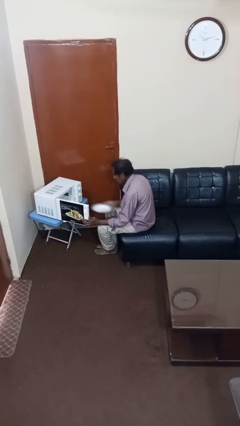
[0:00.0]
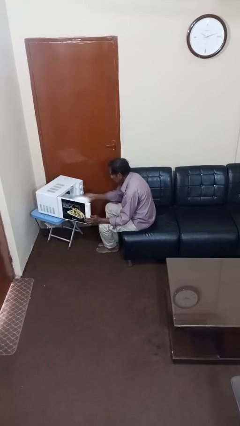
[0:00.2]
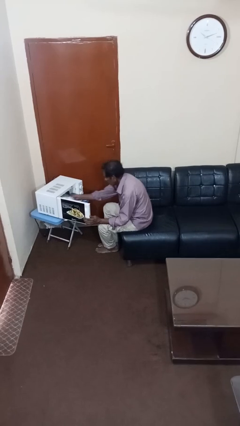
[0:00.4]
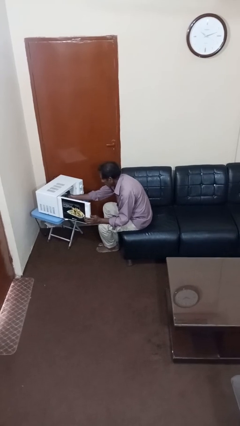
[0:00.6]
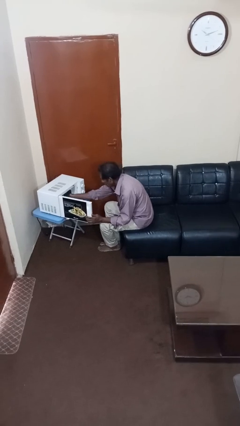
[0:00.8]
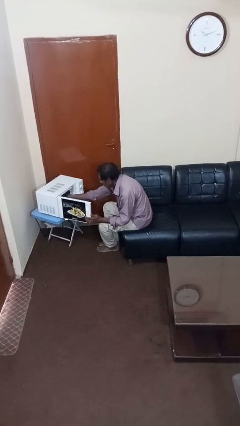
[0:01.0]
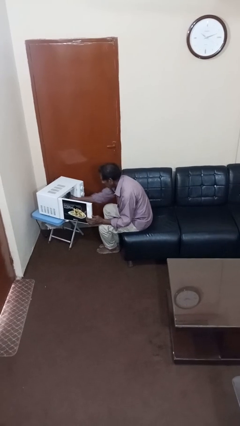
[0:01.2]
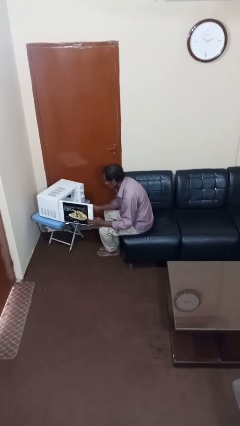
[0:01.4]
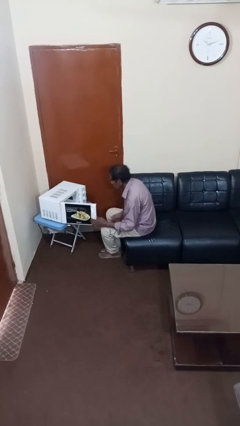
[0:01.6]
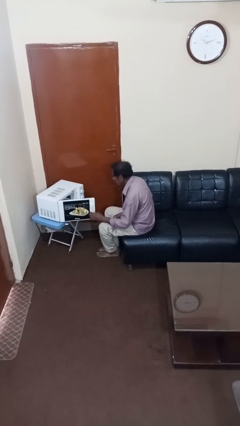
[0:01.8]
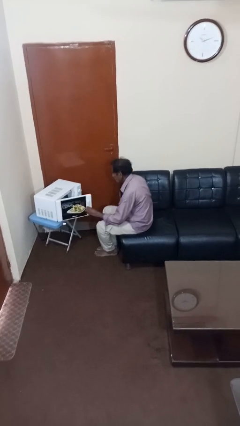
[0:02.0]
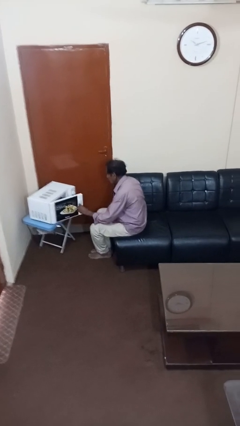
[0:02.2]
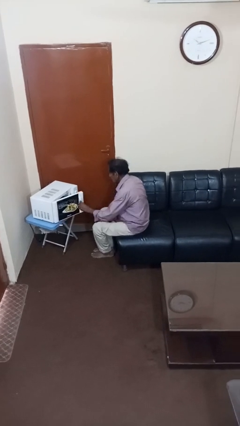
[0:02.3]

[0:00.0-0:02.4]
person puts object into microwave

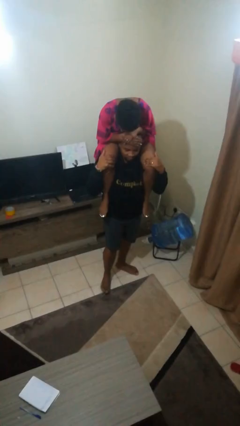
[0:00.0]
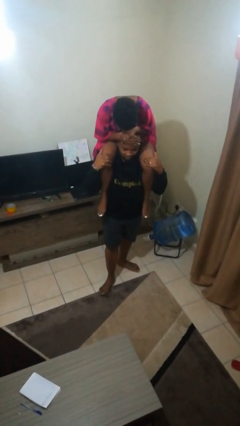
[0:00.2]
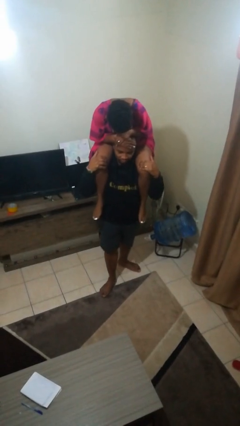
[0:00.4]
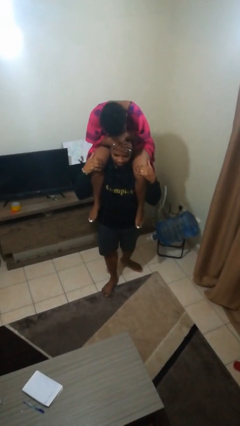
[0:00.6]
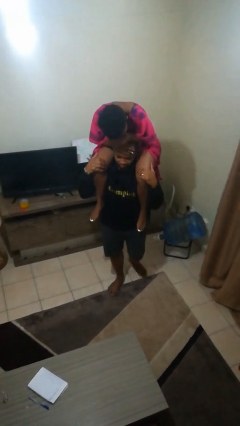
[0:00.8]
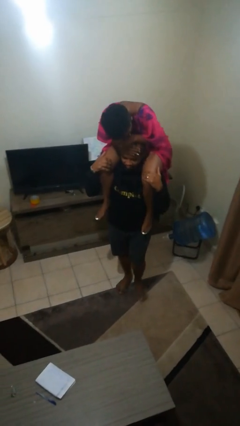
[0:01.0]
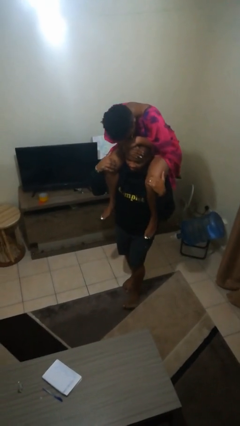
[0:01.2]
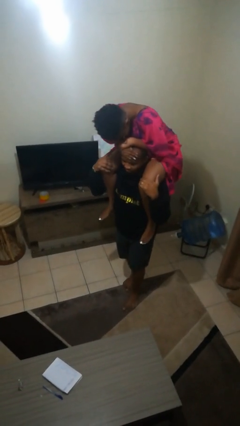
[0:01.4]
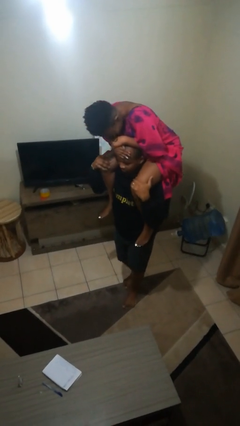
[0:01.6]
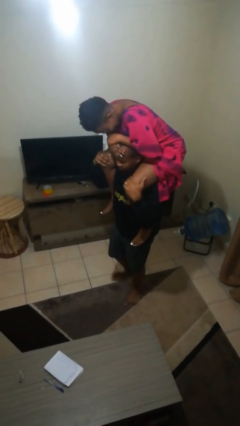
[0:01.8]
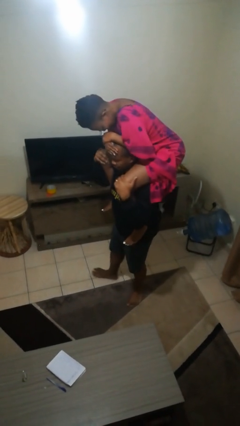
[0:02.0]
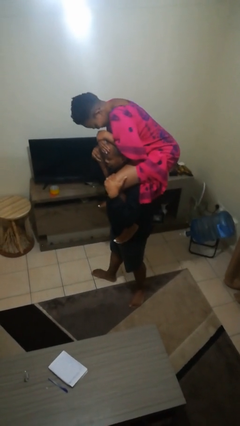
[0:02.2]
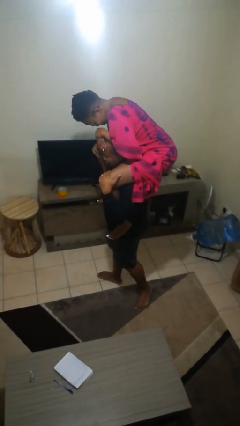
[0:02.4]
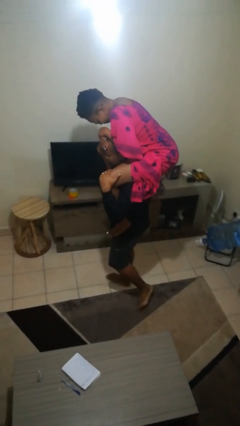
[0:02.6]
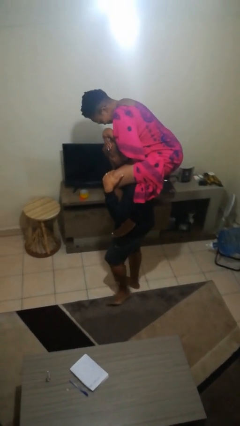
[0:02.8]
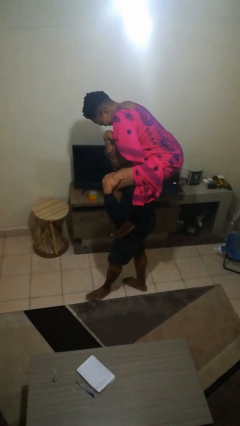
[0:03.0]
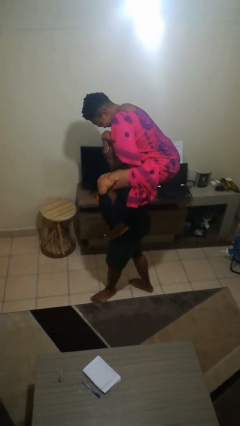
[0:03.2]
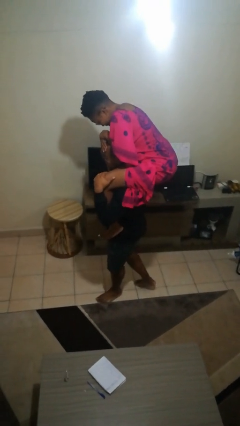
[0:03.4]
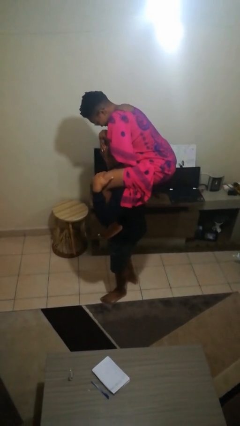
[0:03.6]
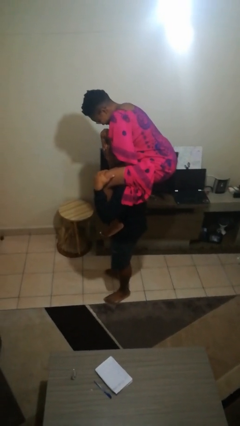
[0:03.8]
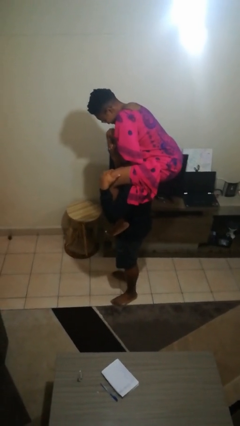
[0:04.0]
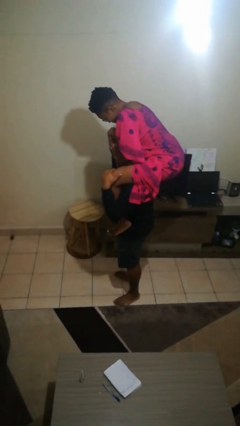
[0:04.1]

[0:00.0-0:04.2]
person carries person on shoulders

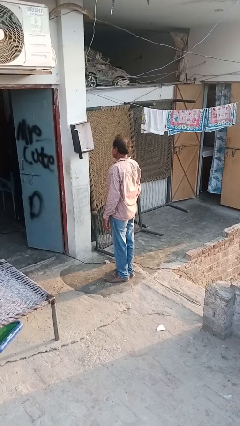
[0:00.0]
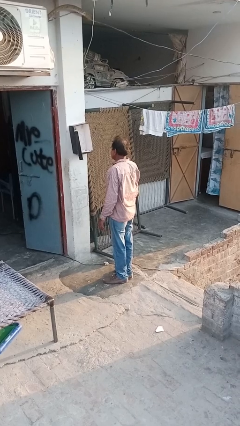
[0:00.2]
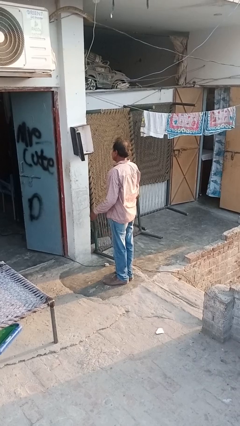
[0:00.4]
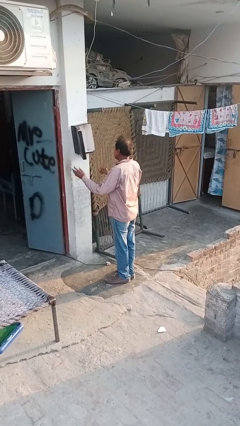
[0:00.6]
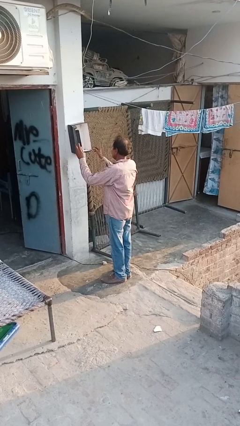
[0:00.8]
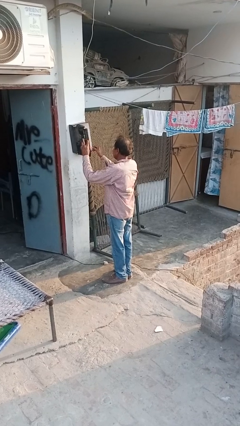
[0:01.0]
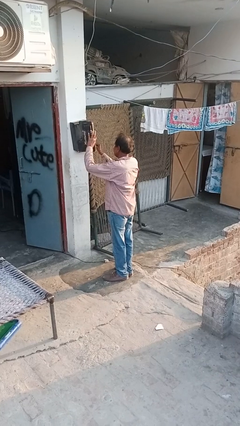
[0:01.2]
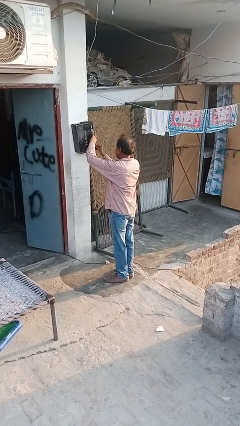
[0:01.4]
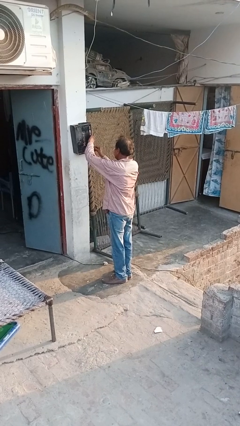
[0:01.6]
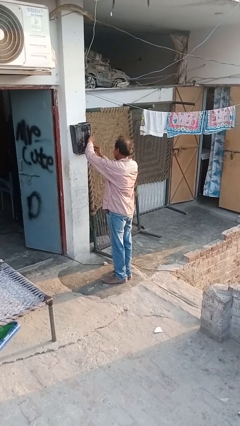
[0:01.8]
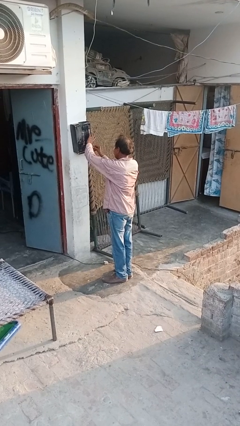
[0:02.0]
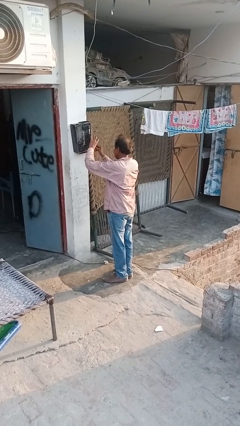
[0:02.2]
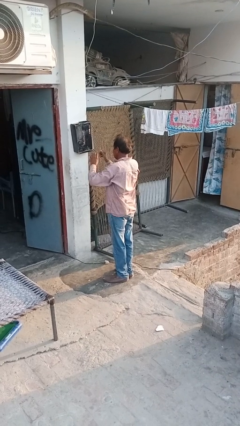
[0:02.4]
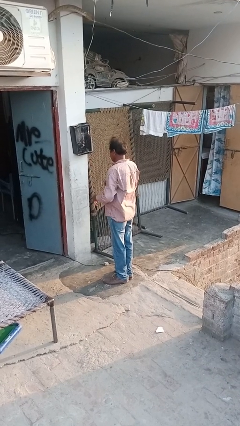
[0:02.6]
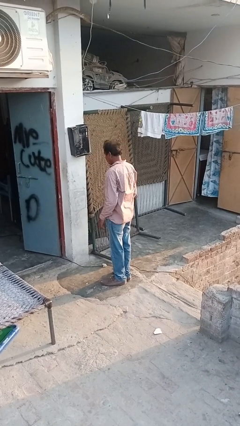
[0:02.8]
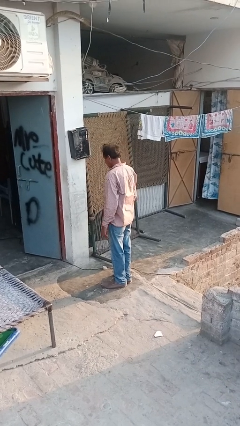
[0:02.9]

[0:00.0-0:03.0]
person closes mailbox

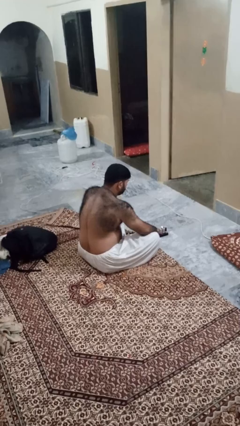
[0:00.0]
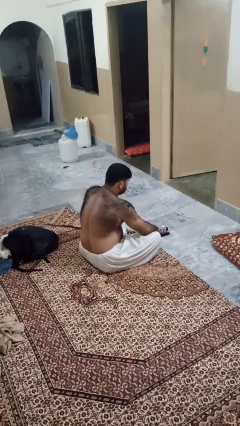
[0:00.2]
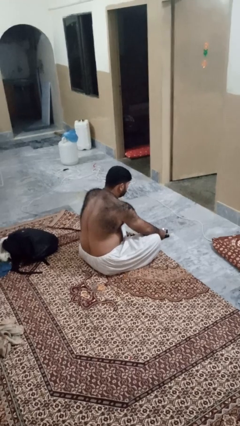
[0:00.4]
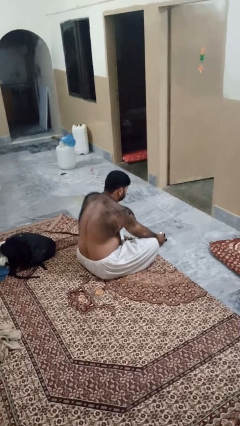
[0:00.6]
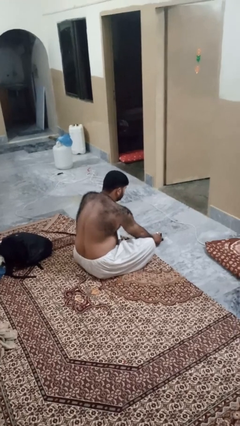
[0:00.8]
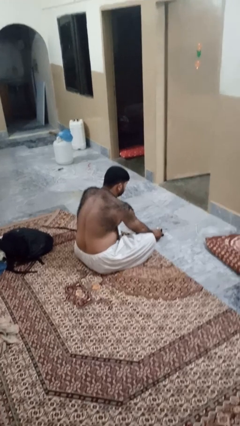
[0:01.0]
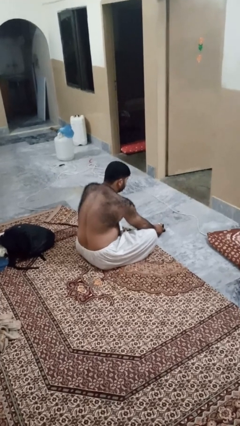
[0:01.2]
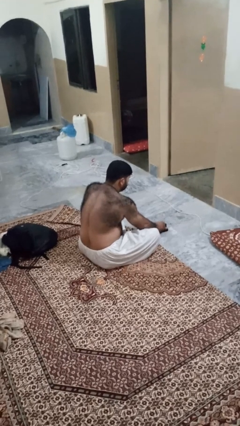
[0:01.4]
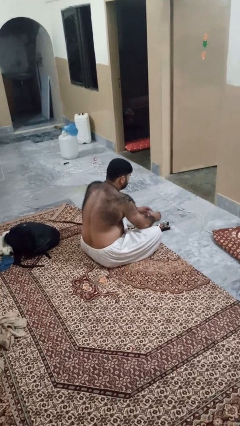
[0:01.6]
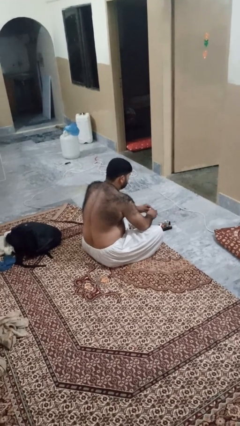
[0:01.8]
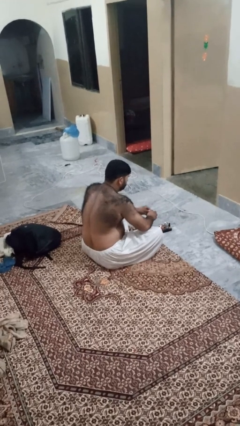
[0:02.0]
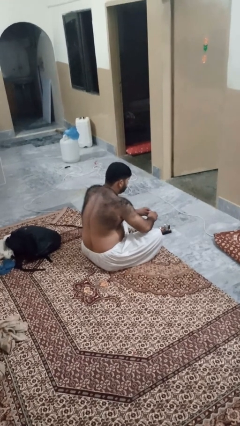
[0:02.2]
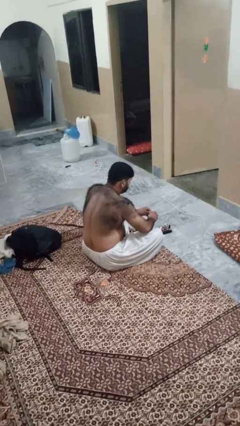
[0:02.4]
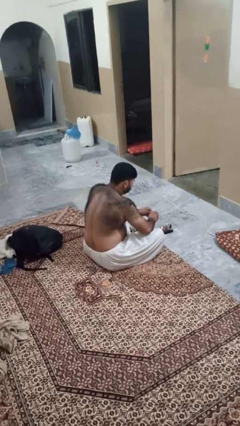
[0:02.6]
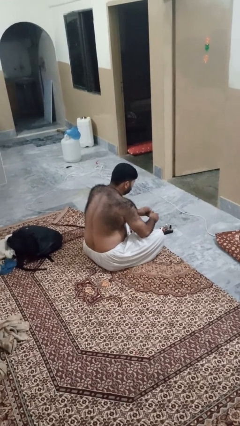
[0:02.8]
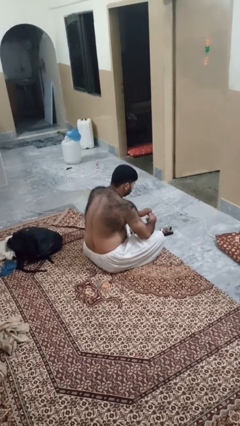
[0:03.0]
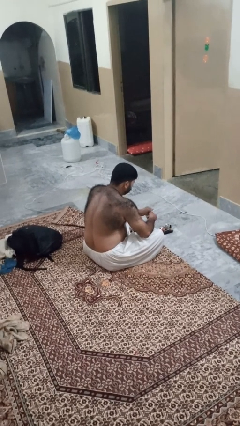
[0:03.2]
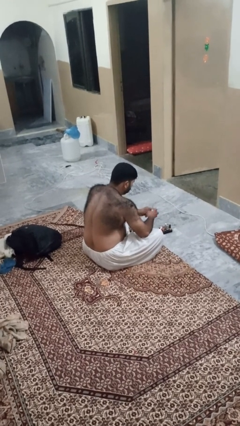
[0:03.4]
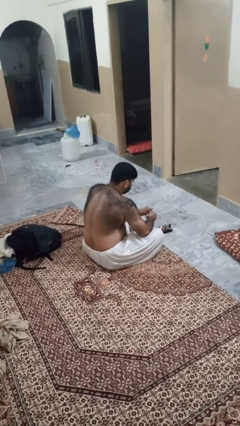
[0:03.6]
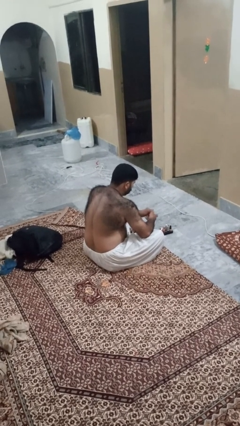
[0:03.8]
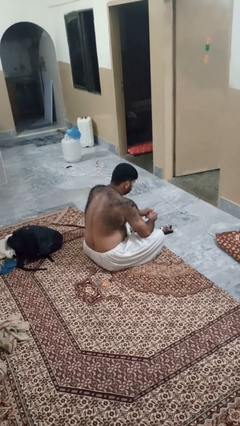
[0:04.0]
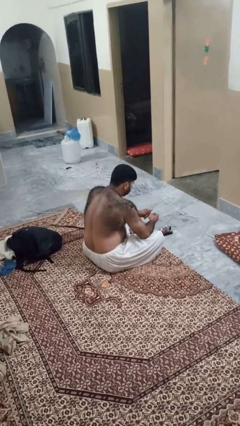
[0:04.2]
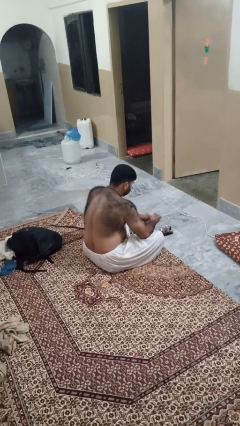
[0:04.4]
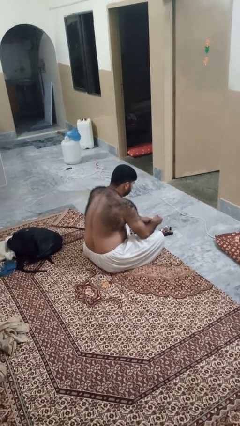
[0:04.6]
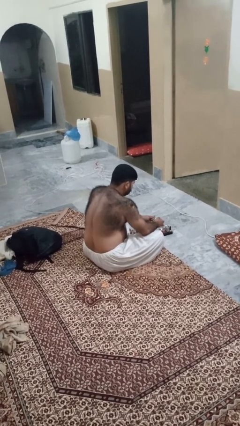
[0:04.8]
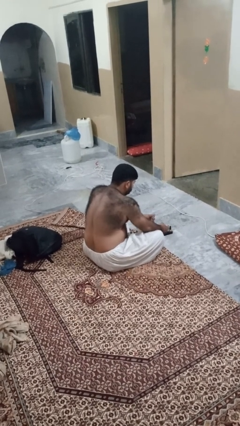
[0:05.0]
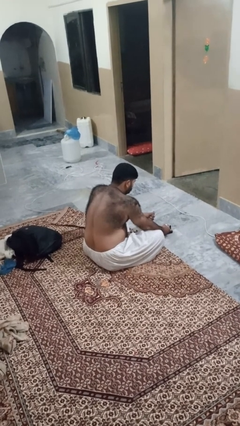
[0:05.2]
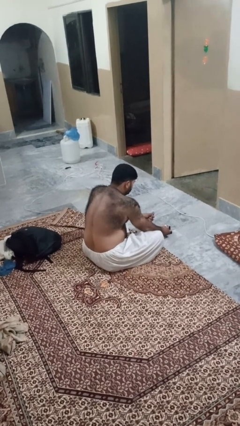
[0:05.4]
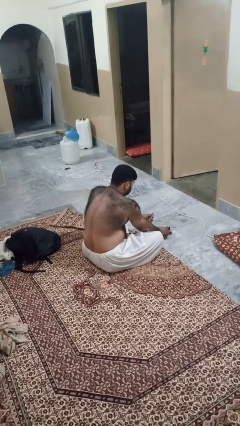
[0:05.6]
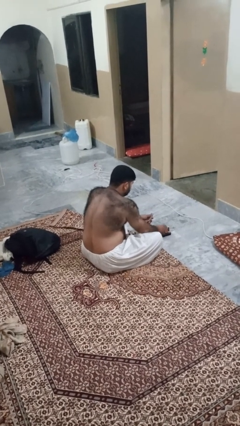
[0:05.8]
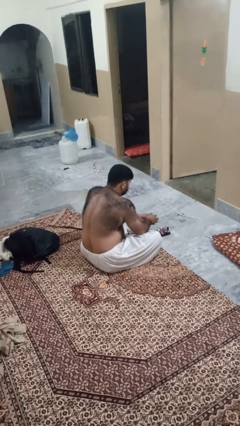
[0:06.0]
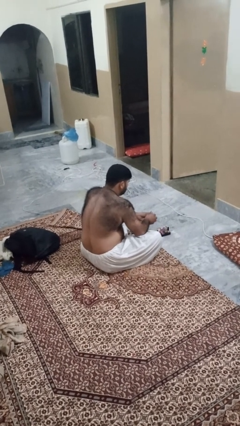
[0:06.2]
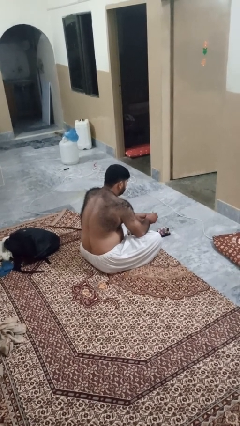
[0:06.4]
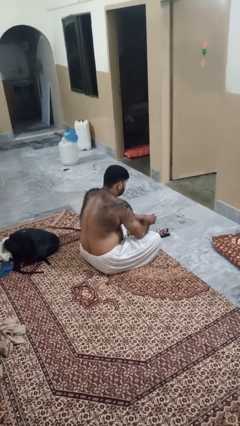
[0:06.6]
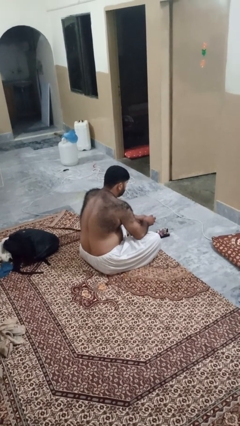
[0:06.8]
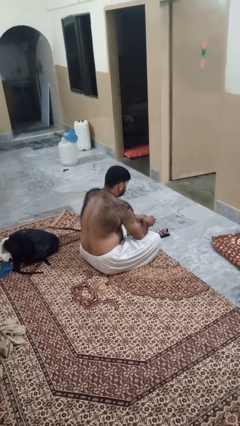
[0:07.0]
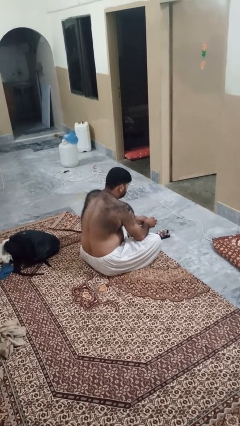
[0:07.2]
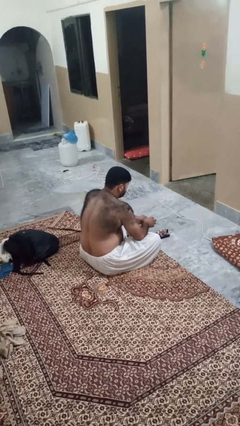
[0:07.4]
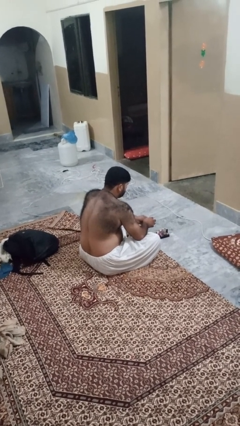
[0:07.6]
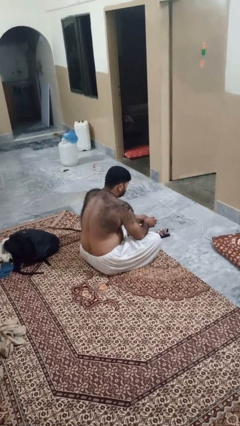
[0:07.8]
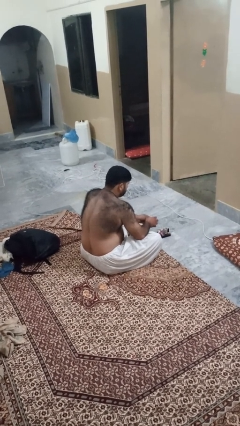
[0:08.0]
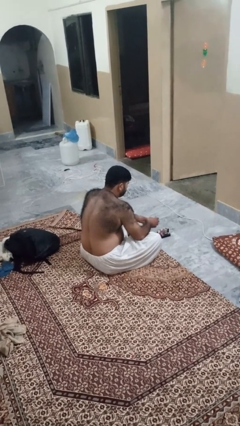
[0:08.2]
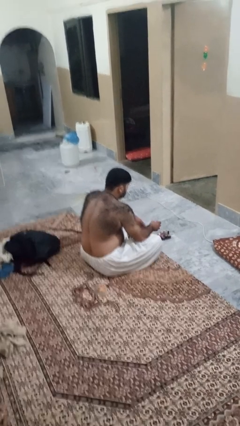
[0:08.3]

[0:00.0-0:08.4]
person paints fingernails
